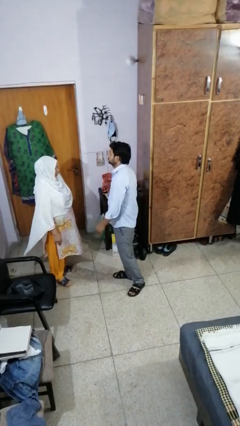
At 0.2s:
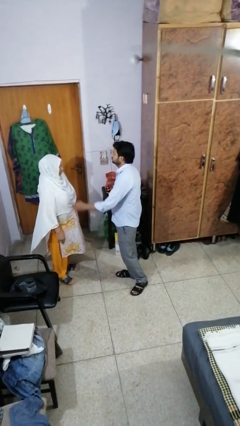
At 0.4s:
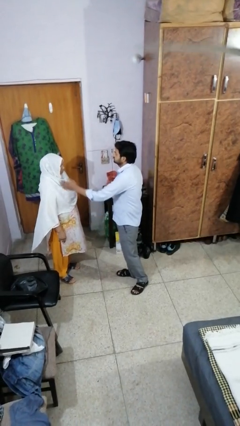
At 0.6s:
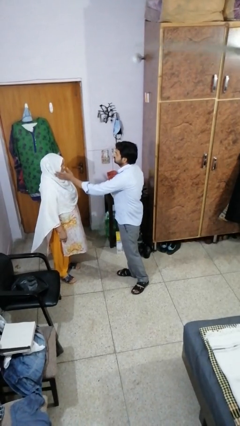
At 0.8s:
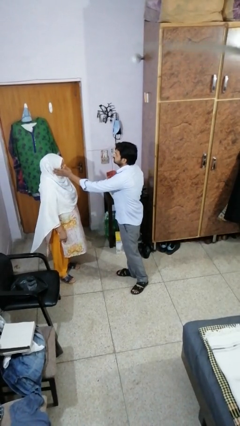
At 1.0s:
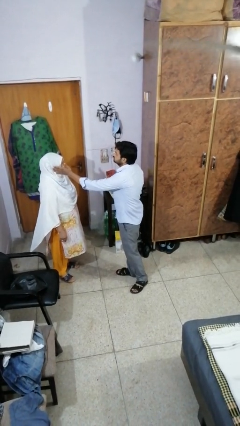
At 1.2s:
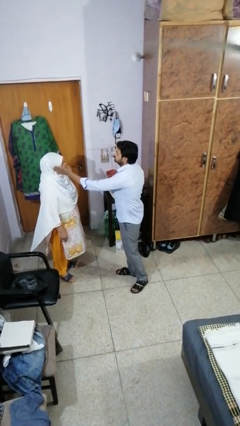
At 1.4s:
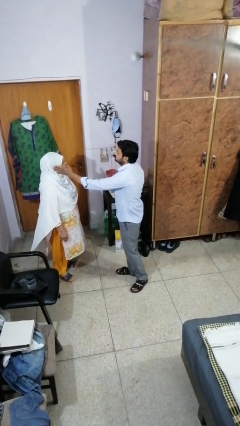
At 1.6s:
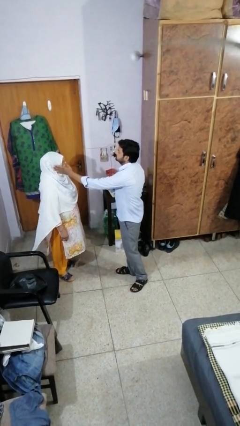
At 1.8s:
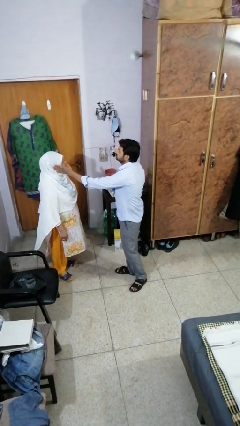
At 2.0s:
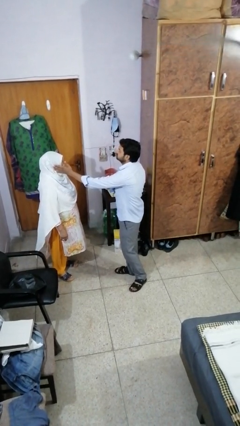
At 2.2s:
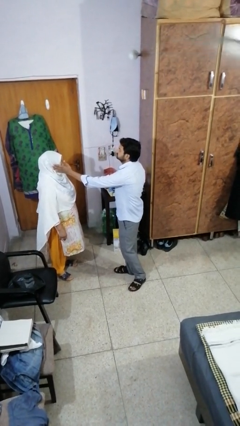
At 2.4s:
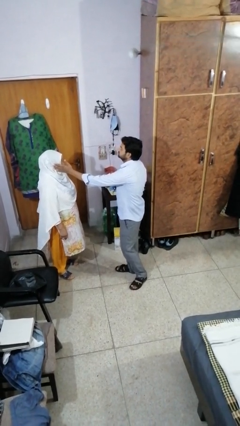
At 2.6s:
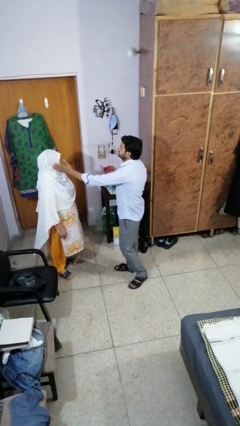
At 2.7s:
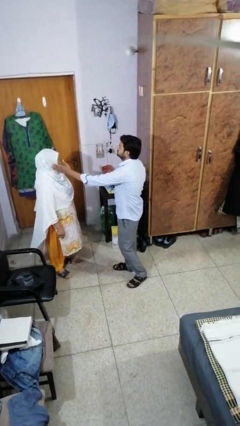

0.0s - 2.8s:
person touches face of person

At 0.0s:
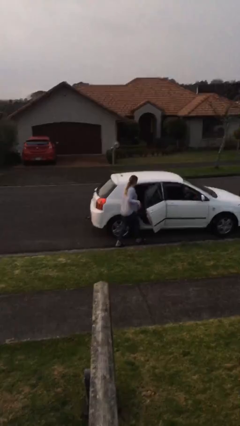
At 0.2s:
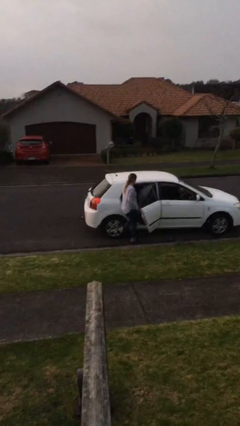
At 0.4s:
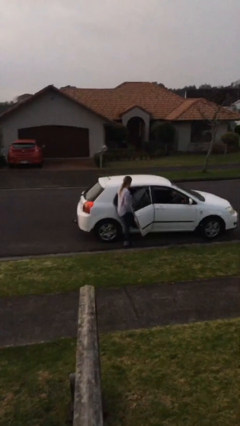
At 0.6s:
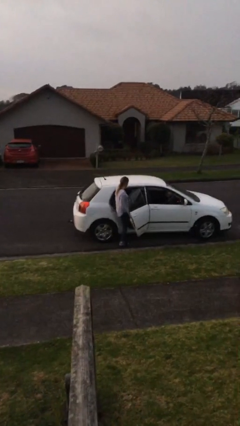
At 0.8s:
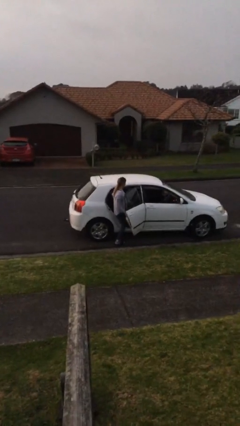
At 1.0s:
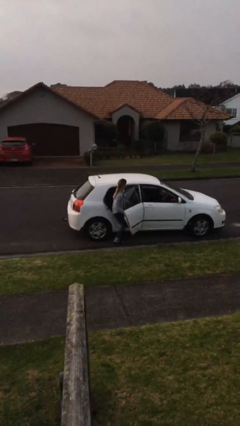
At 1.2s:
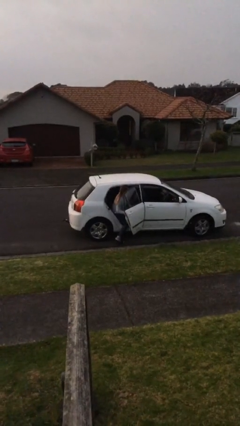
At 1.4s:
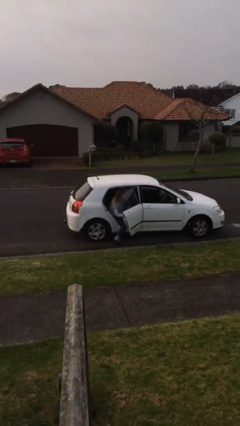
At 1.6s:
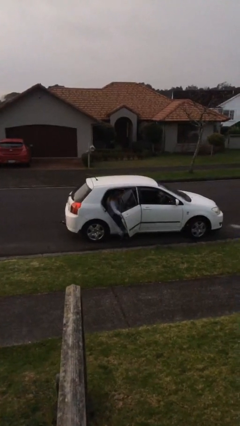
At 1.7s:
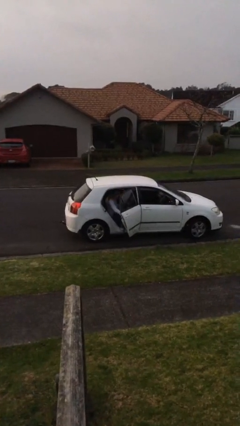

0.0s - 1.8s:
person enters car

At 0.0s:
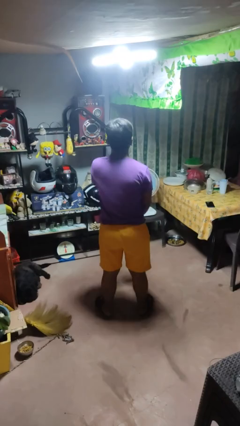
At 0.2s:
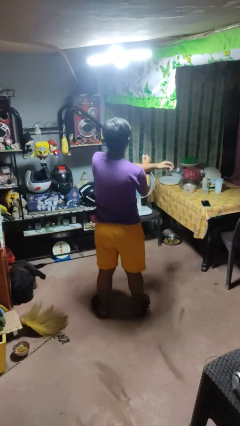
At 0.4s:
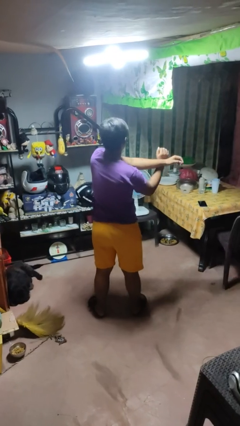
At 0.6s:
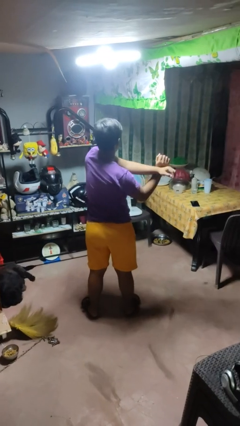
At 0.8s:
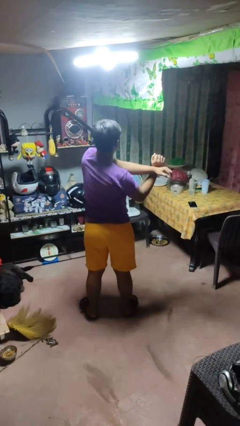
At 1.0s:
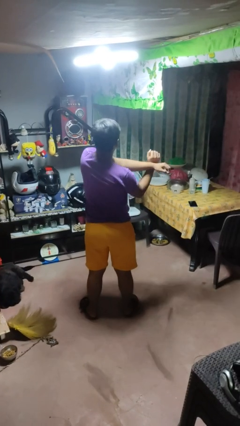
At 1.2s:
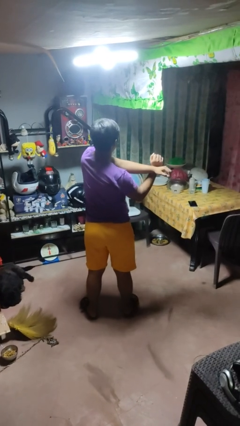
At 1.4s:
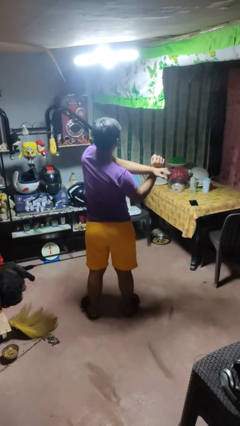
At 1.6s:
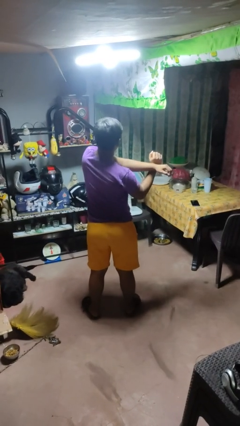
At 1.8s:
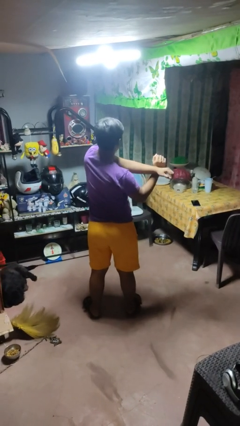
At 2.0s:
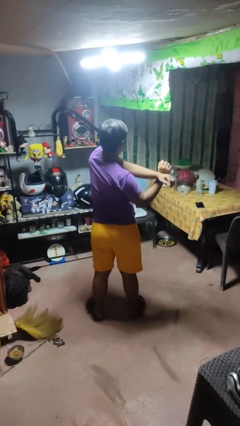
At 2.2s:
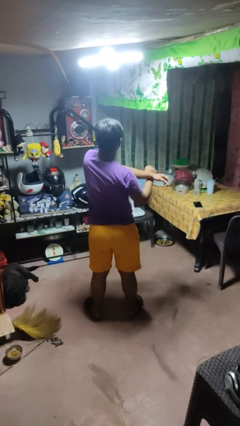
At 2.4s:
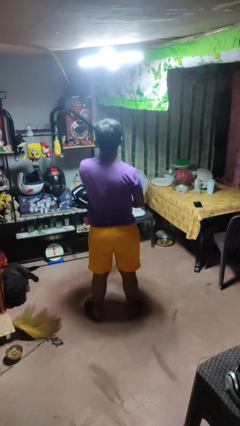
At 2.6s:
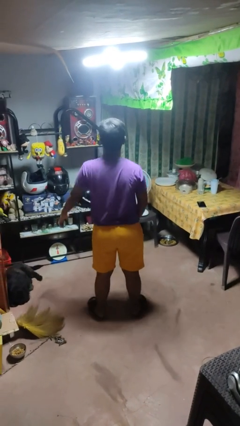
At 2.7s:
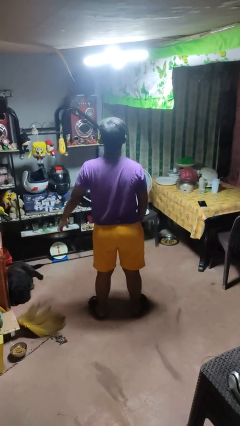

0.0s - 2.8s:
person crosses arms

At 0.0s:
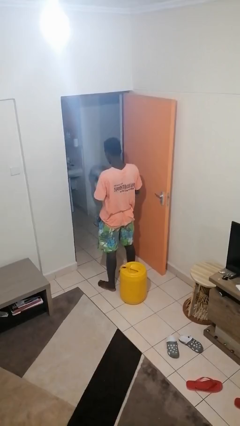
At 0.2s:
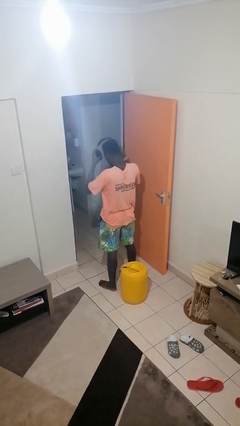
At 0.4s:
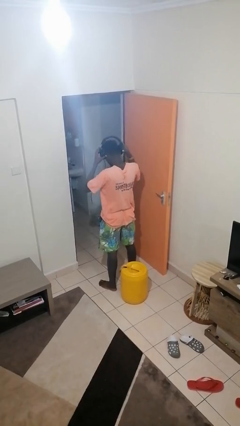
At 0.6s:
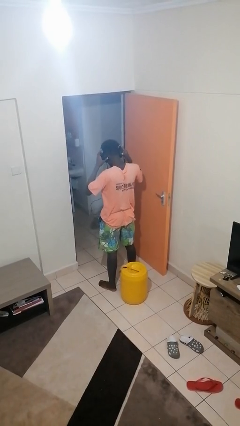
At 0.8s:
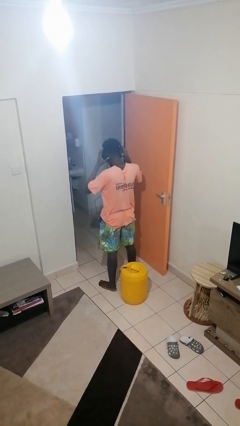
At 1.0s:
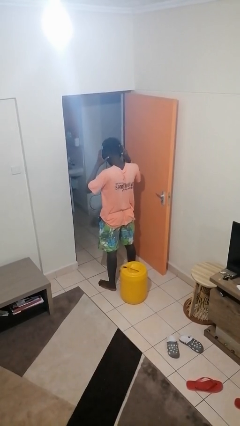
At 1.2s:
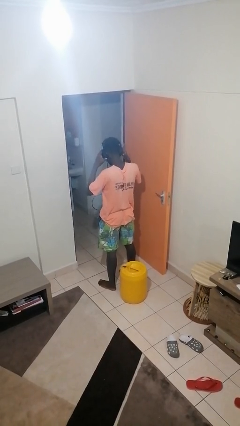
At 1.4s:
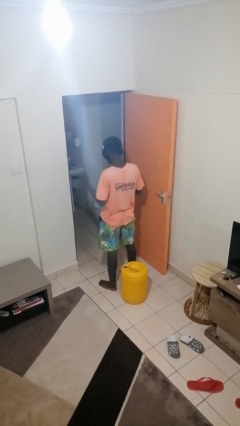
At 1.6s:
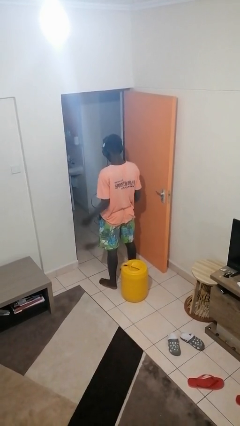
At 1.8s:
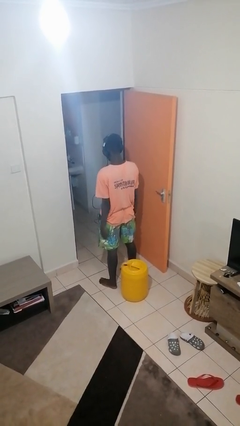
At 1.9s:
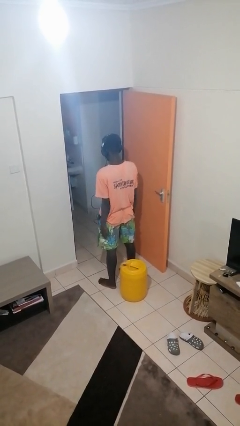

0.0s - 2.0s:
person puts on headphones

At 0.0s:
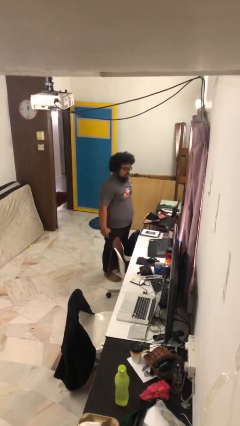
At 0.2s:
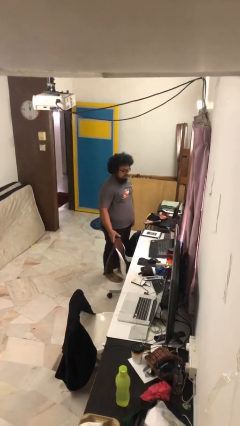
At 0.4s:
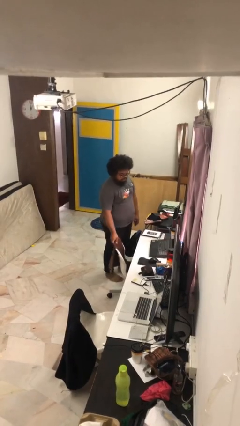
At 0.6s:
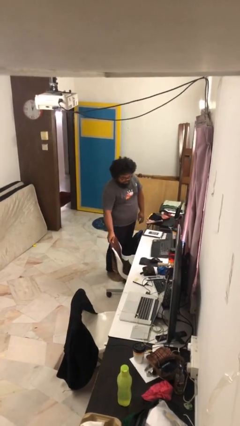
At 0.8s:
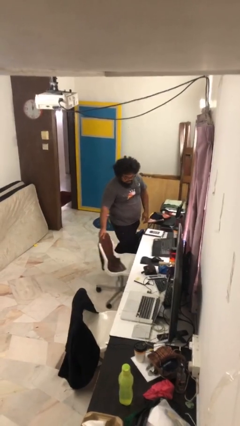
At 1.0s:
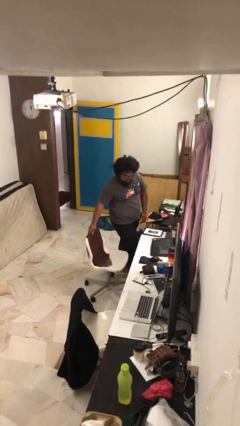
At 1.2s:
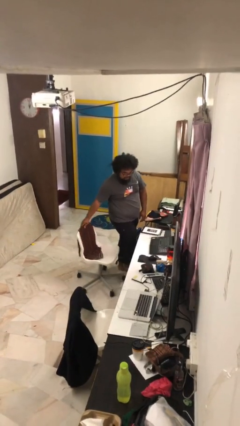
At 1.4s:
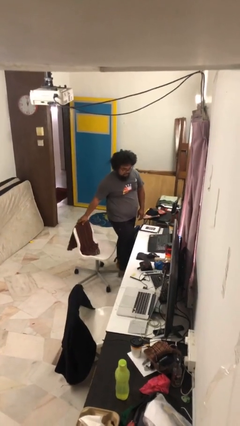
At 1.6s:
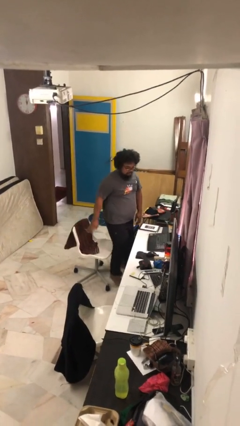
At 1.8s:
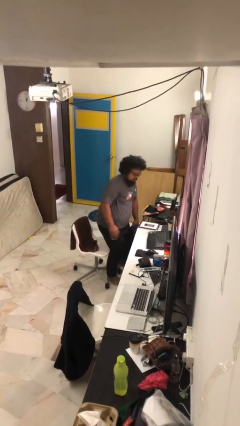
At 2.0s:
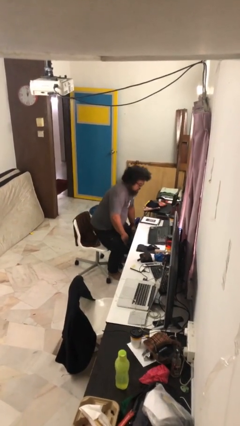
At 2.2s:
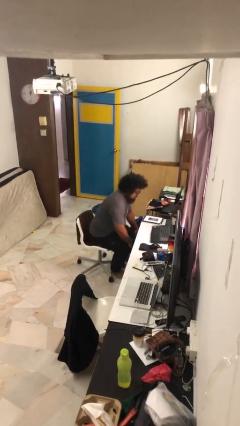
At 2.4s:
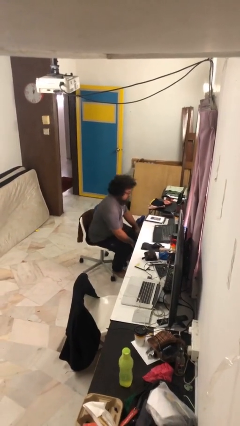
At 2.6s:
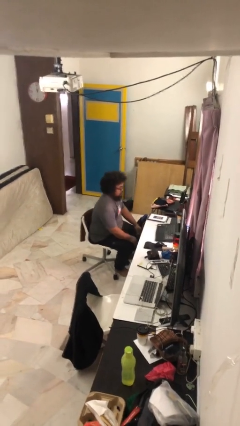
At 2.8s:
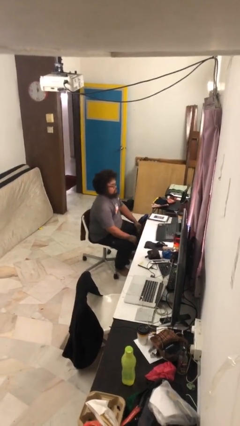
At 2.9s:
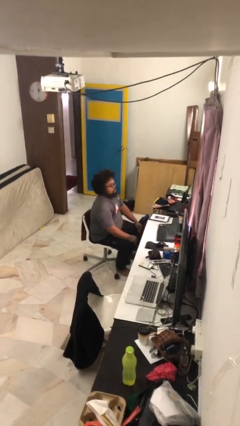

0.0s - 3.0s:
person sits down

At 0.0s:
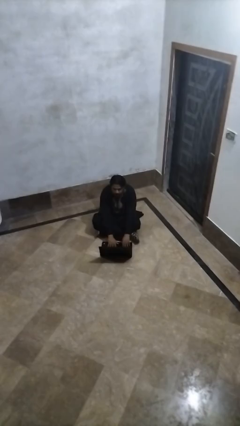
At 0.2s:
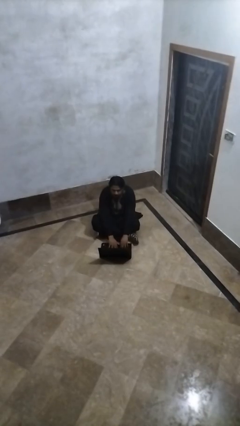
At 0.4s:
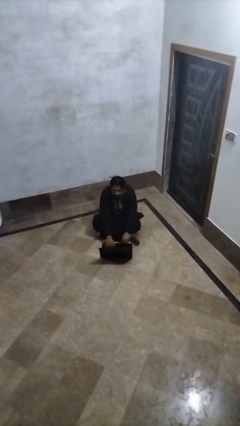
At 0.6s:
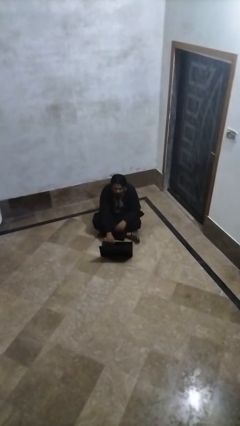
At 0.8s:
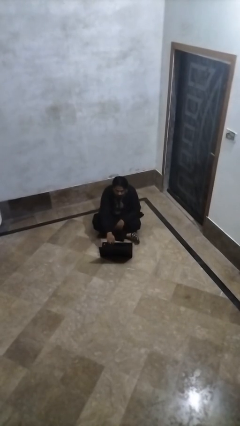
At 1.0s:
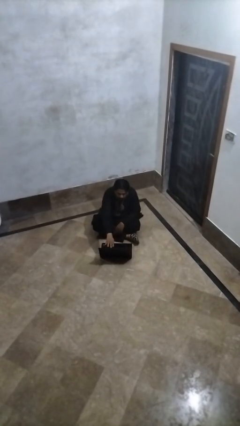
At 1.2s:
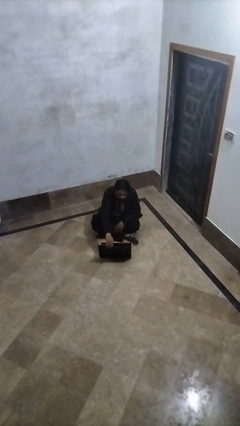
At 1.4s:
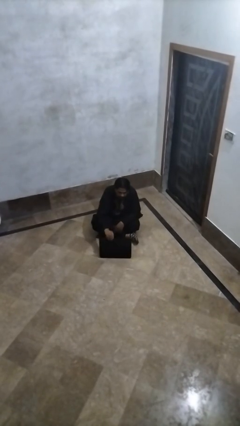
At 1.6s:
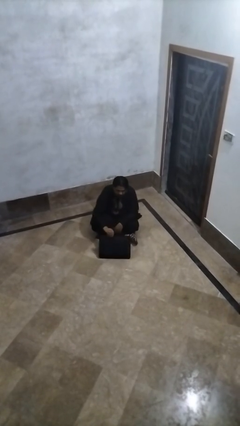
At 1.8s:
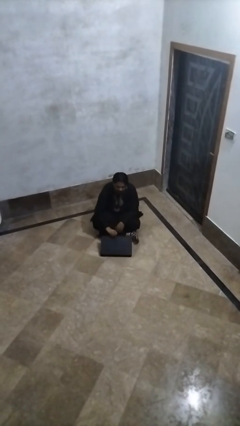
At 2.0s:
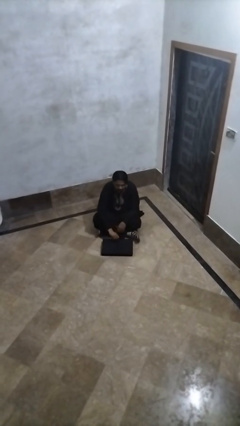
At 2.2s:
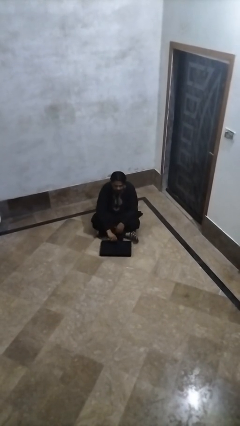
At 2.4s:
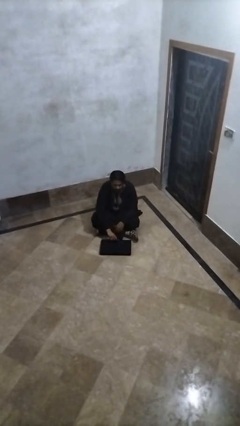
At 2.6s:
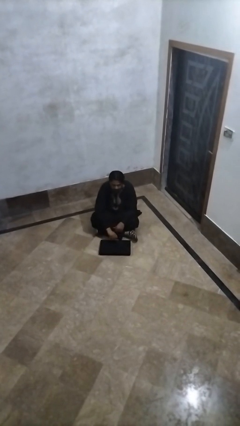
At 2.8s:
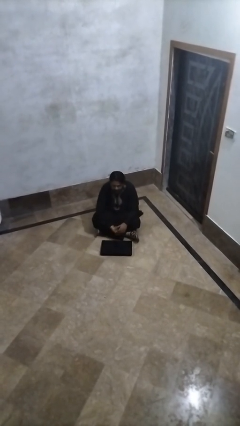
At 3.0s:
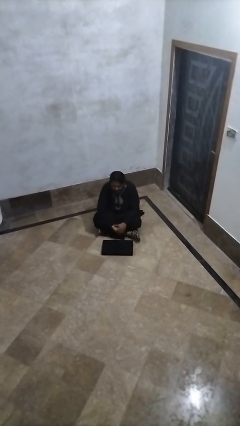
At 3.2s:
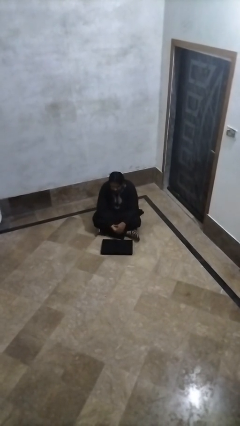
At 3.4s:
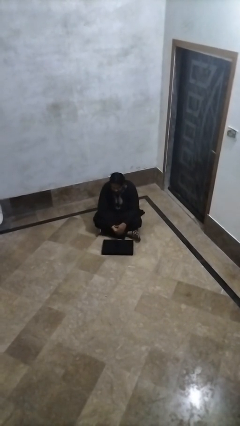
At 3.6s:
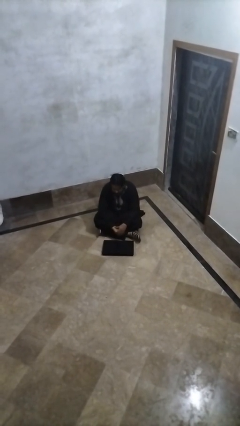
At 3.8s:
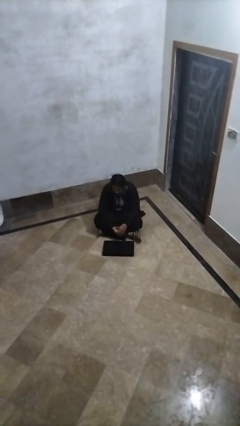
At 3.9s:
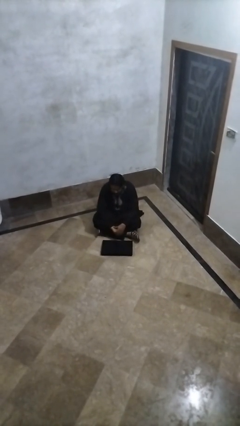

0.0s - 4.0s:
person closes laptop

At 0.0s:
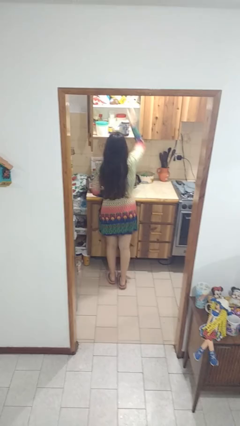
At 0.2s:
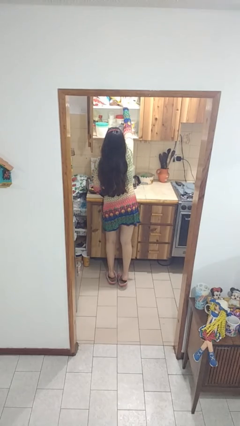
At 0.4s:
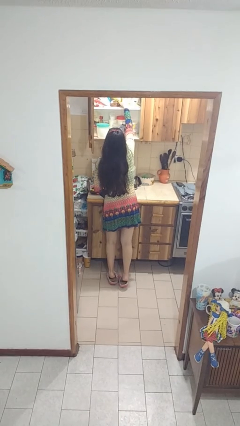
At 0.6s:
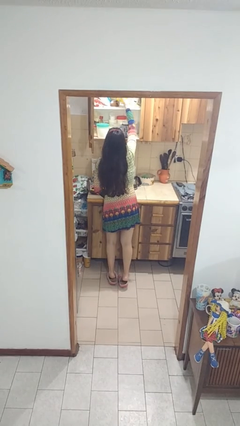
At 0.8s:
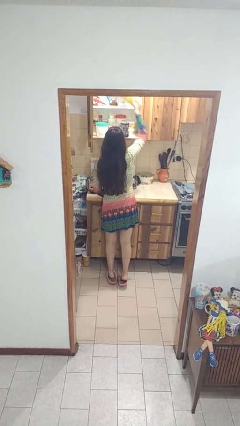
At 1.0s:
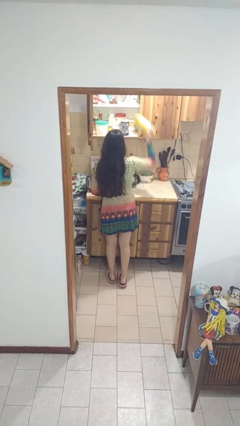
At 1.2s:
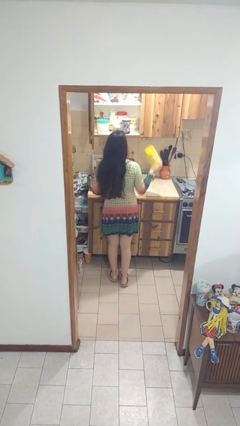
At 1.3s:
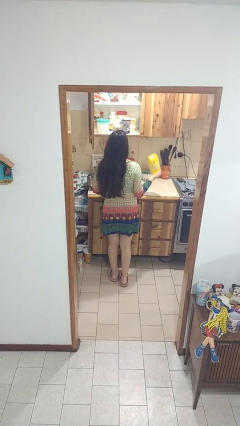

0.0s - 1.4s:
person takes object from cabinet
